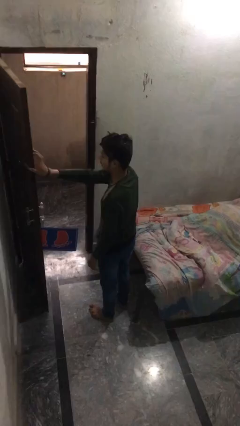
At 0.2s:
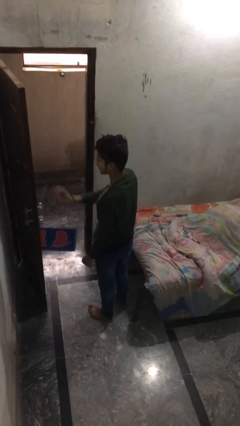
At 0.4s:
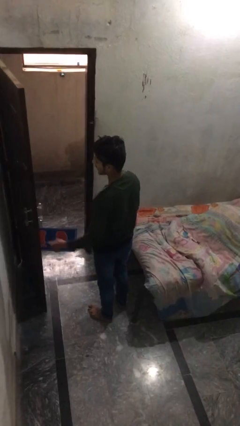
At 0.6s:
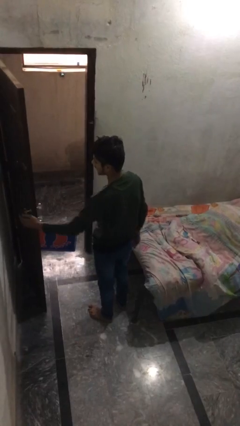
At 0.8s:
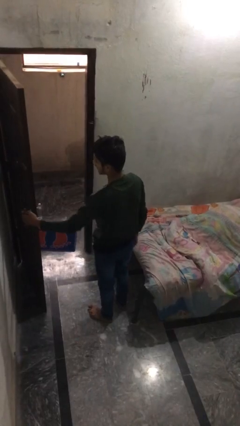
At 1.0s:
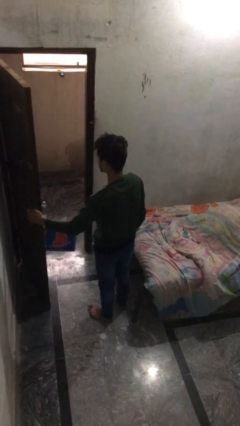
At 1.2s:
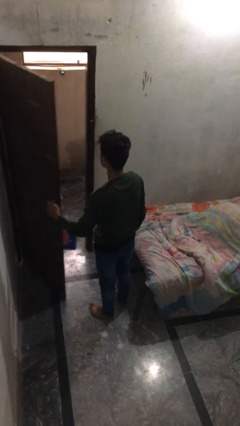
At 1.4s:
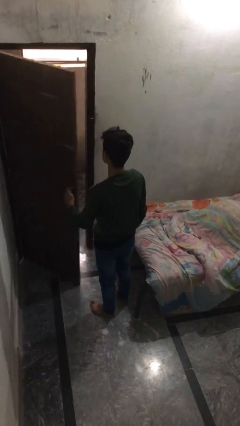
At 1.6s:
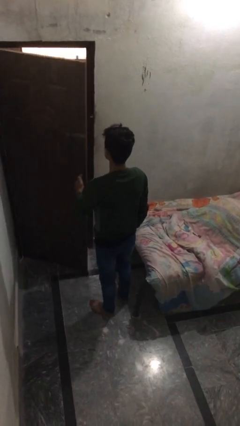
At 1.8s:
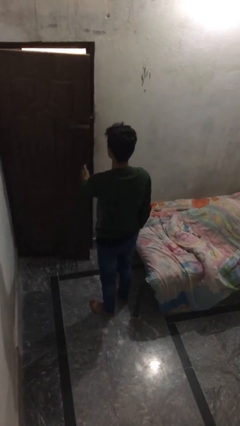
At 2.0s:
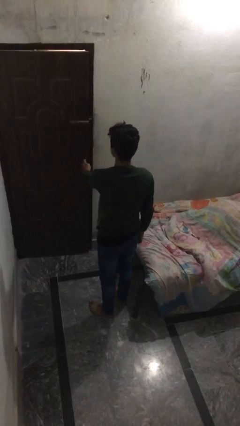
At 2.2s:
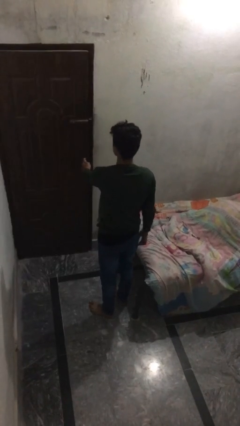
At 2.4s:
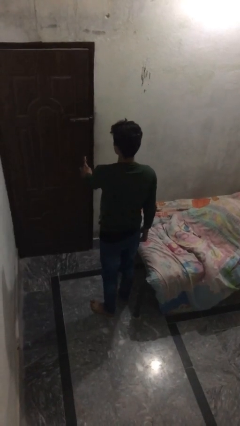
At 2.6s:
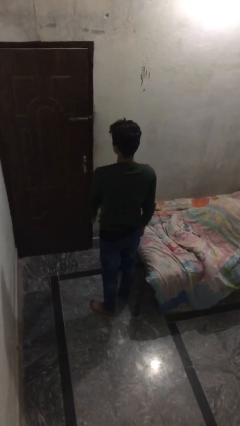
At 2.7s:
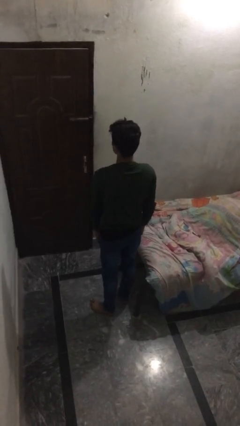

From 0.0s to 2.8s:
person closes facility door

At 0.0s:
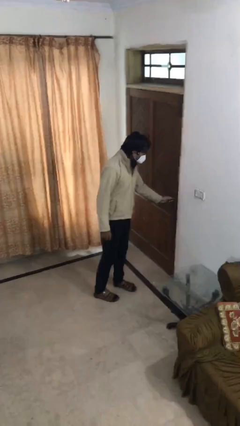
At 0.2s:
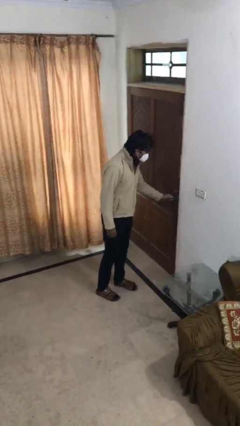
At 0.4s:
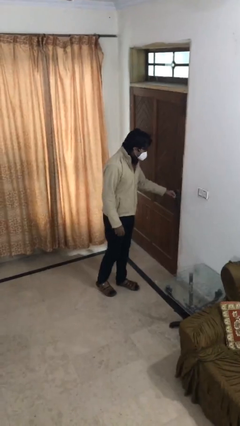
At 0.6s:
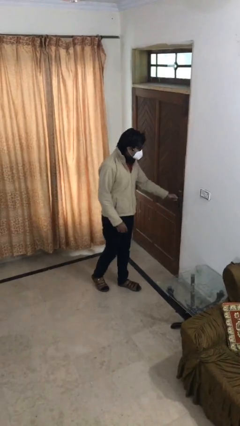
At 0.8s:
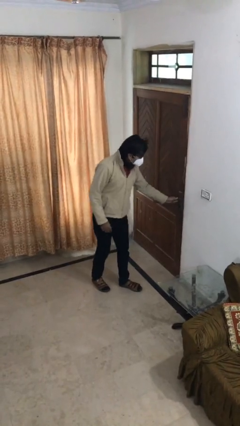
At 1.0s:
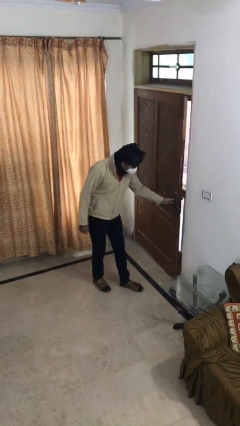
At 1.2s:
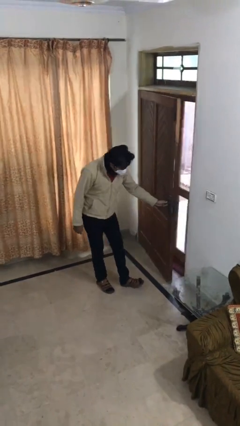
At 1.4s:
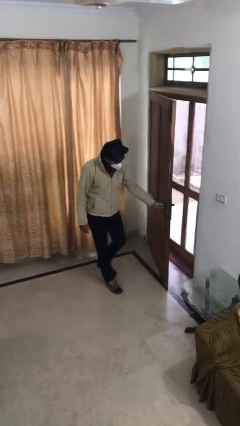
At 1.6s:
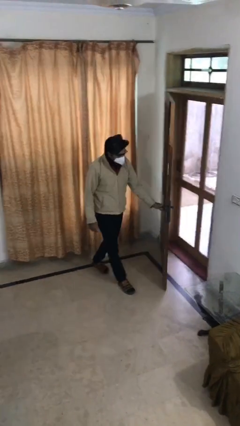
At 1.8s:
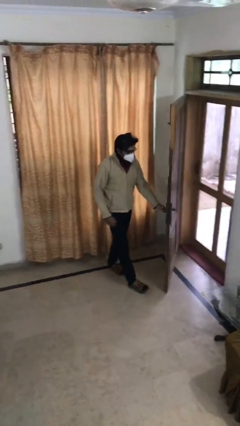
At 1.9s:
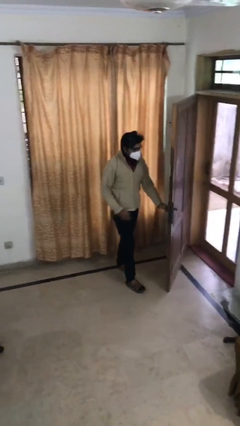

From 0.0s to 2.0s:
person opens facility door

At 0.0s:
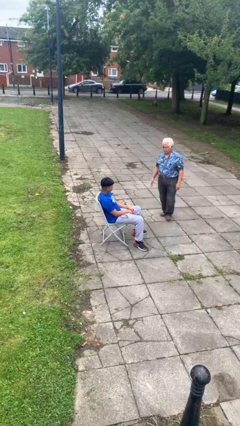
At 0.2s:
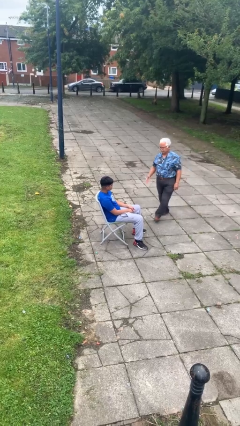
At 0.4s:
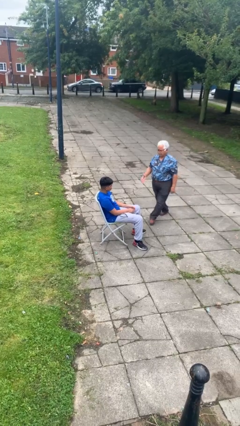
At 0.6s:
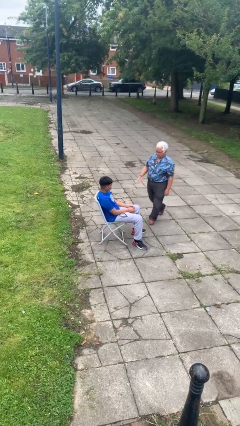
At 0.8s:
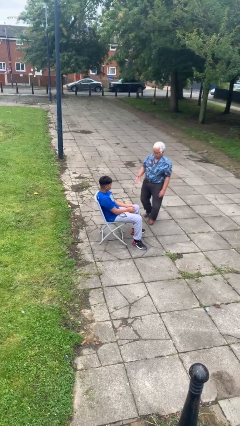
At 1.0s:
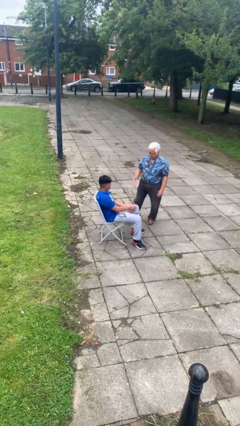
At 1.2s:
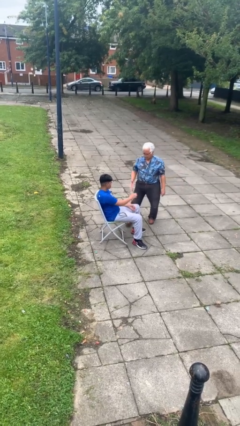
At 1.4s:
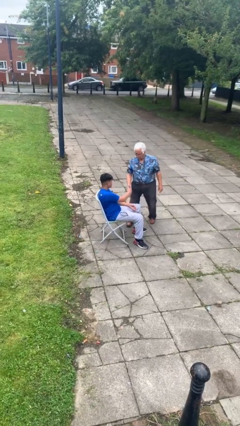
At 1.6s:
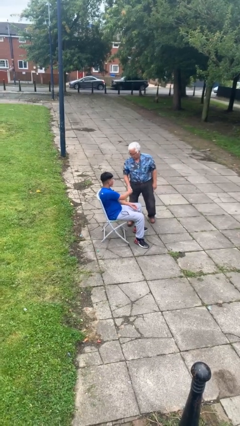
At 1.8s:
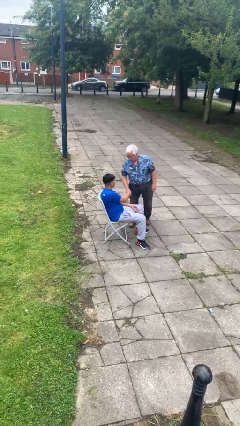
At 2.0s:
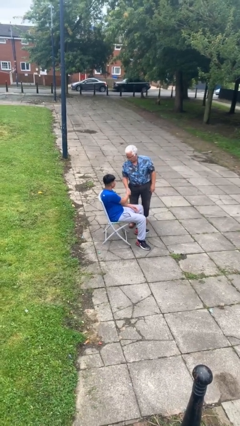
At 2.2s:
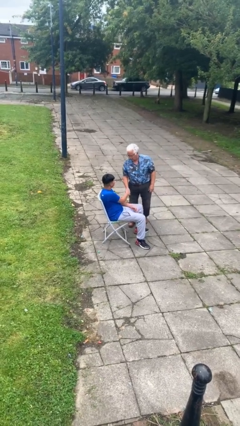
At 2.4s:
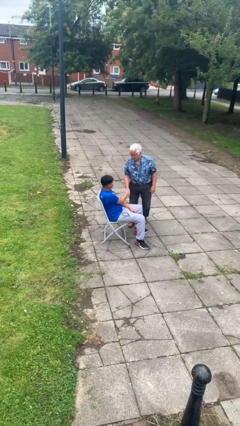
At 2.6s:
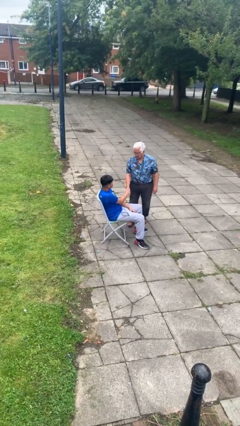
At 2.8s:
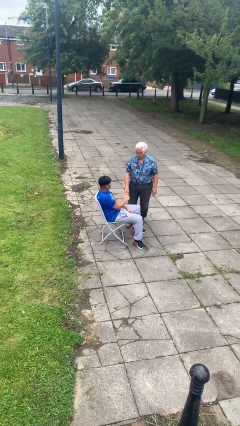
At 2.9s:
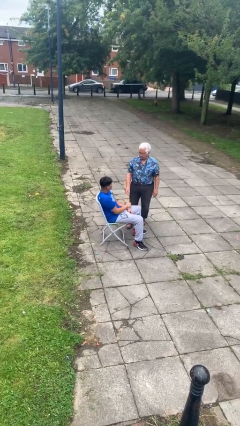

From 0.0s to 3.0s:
person shakes hand

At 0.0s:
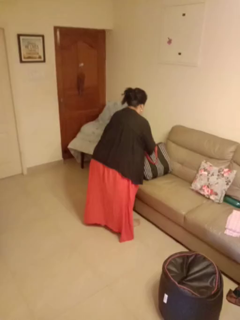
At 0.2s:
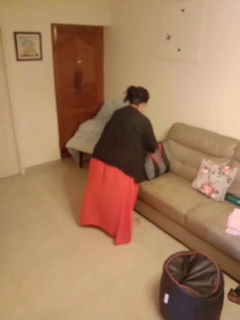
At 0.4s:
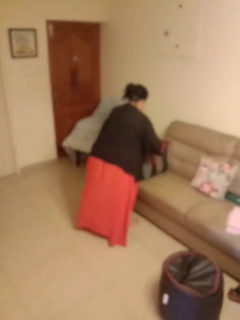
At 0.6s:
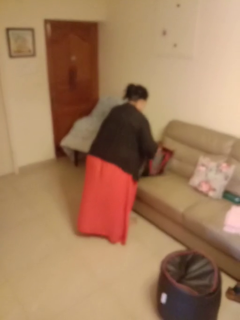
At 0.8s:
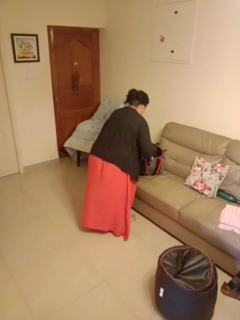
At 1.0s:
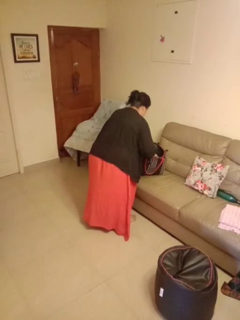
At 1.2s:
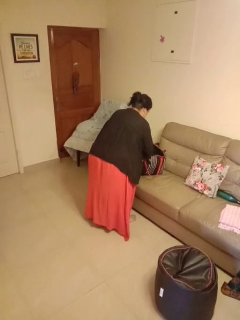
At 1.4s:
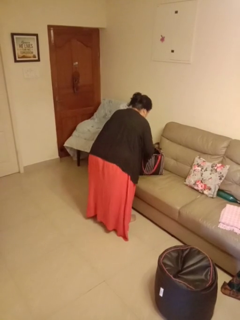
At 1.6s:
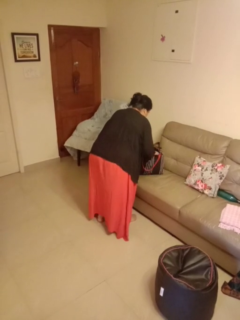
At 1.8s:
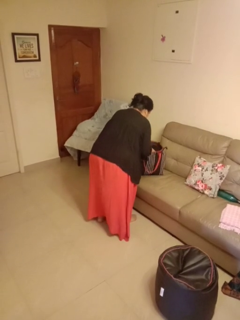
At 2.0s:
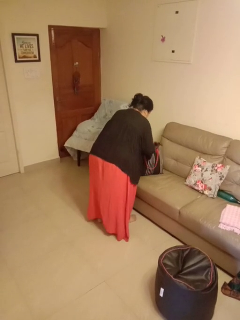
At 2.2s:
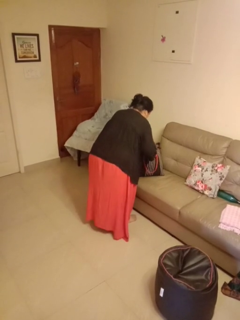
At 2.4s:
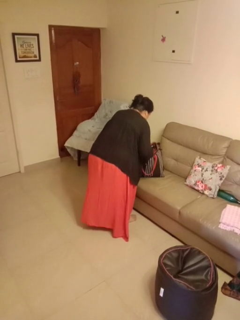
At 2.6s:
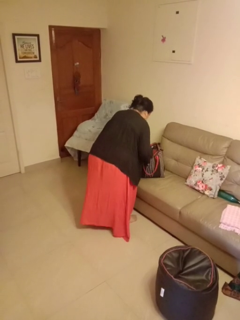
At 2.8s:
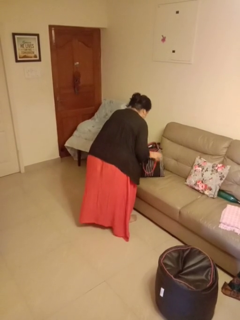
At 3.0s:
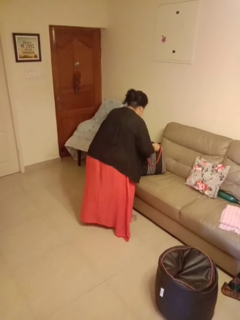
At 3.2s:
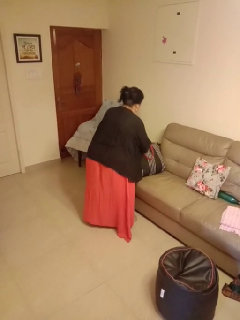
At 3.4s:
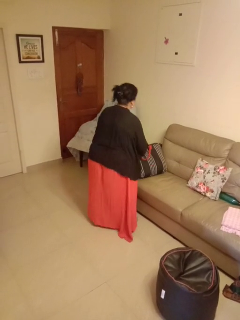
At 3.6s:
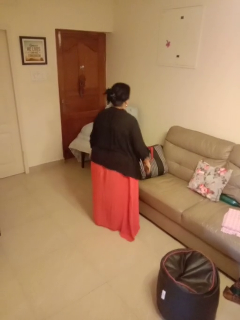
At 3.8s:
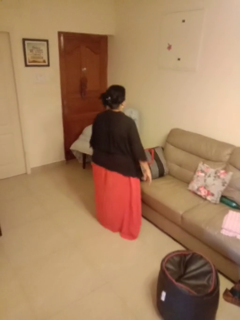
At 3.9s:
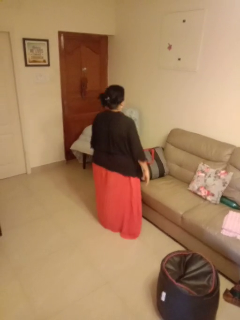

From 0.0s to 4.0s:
person searches in bag

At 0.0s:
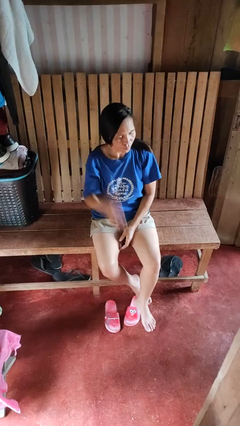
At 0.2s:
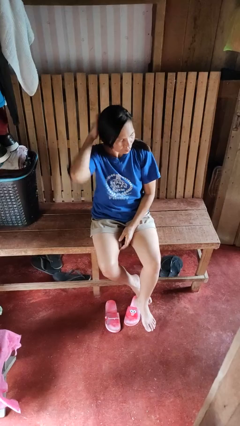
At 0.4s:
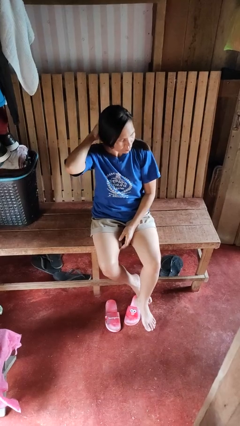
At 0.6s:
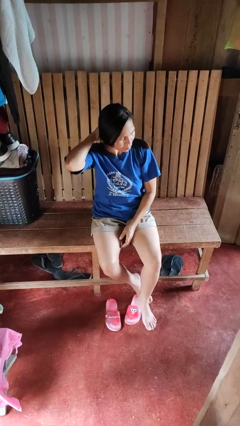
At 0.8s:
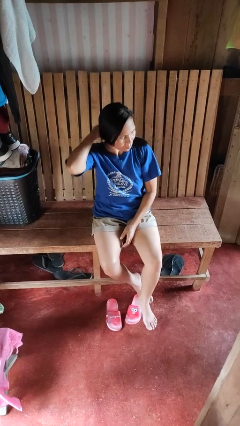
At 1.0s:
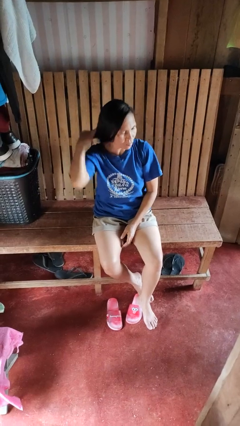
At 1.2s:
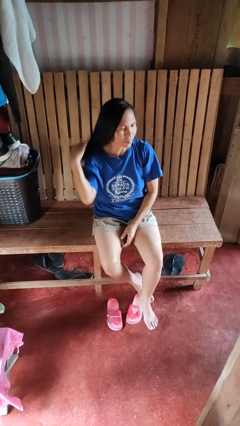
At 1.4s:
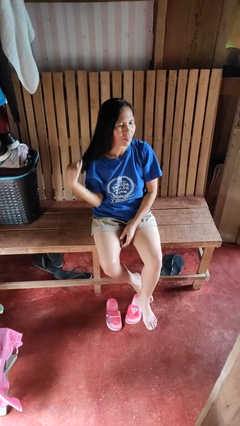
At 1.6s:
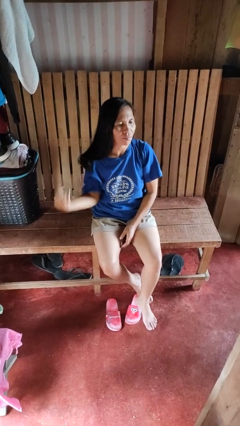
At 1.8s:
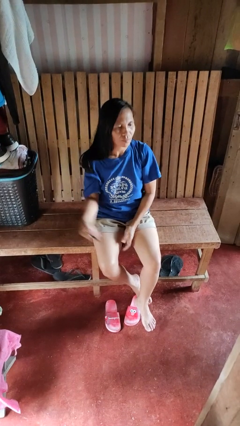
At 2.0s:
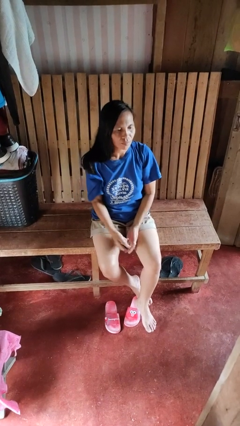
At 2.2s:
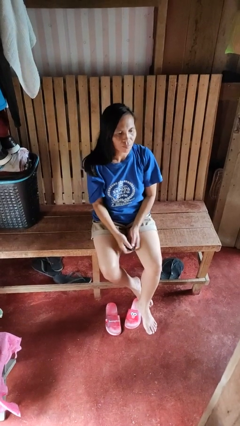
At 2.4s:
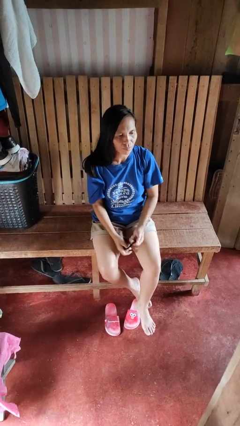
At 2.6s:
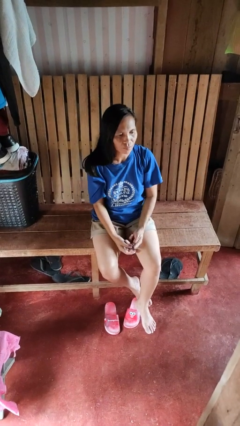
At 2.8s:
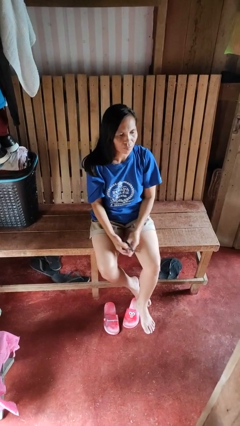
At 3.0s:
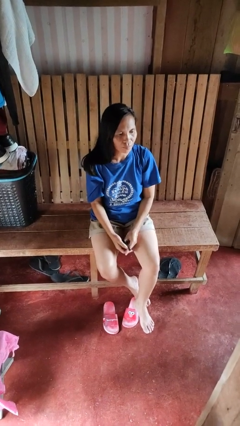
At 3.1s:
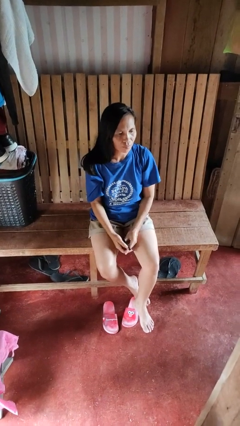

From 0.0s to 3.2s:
person takes off hairtie

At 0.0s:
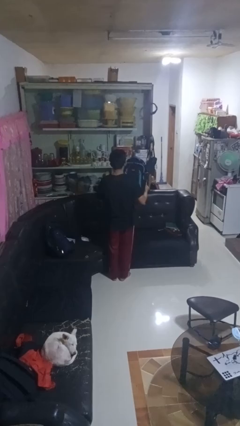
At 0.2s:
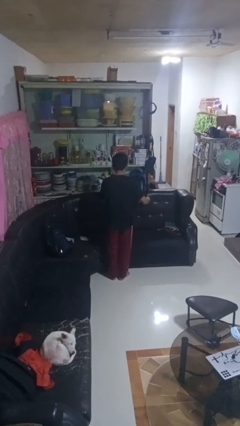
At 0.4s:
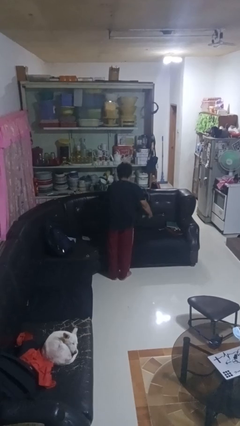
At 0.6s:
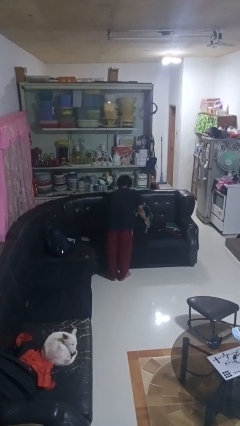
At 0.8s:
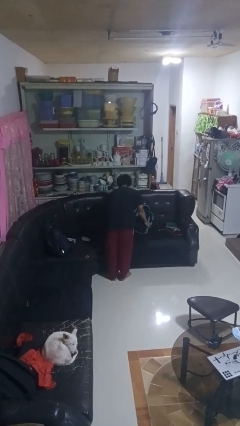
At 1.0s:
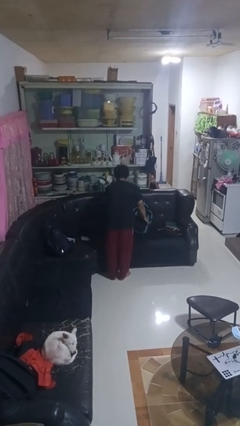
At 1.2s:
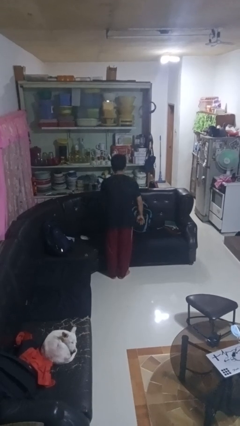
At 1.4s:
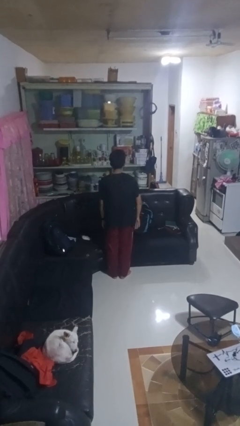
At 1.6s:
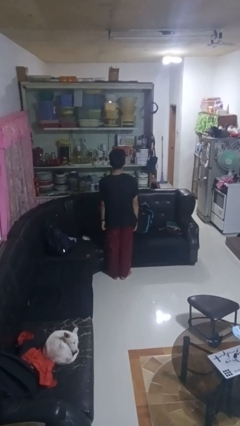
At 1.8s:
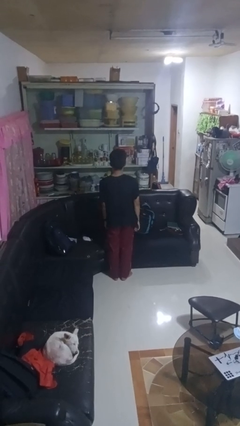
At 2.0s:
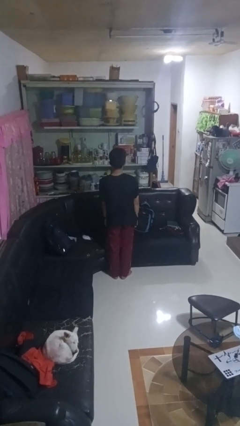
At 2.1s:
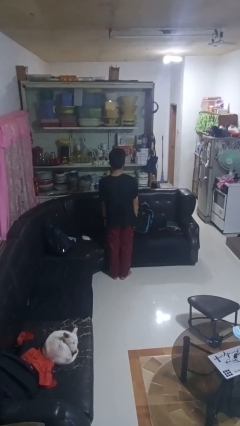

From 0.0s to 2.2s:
person puts down object on couch

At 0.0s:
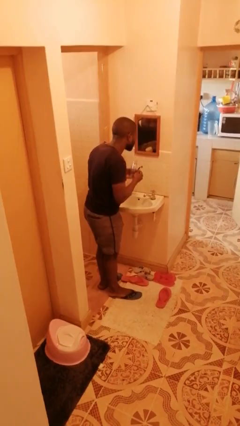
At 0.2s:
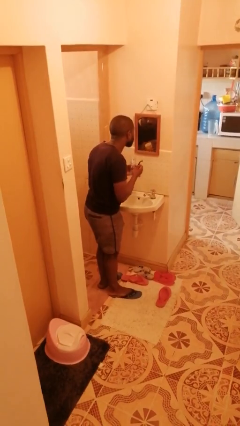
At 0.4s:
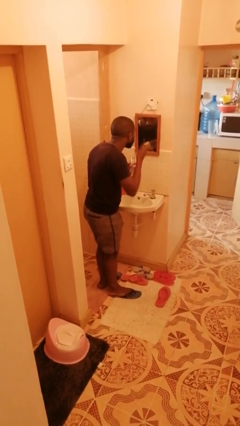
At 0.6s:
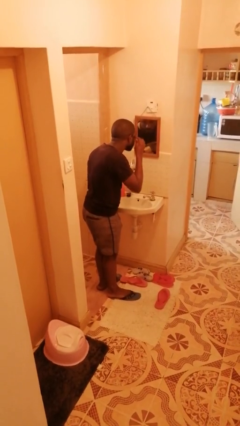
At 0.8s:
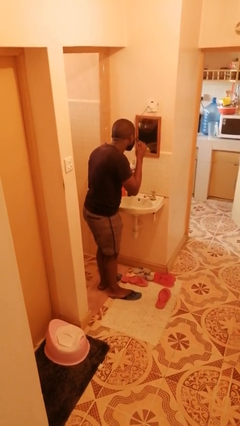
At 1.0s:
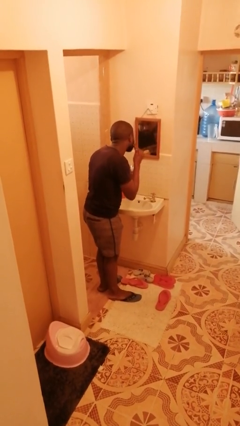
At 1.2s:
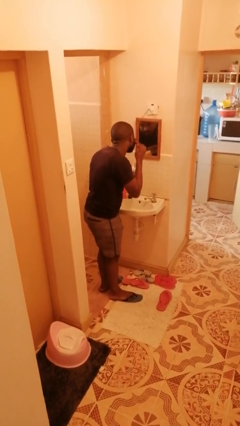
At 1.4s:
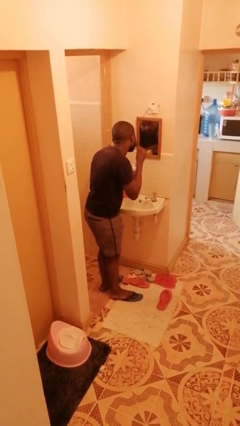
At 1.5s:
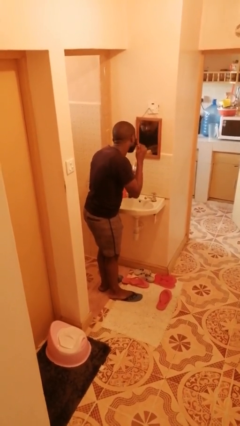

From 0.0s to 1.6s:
person shaves face
